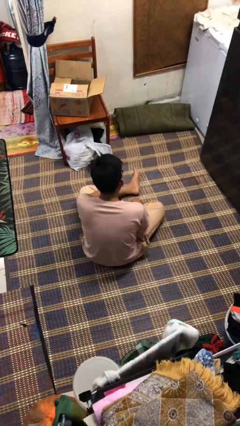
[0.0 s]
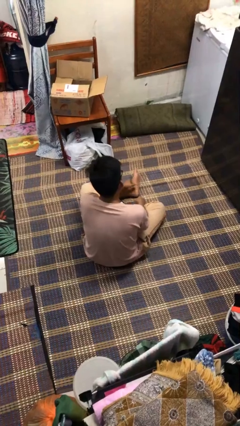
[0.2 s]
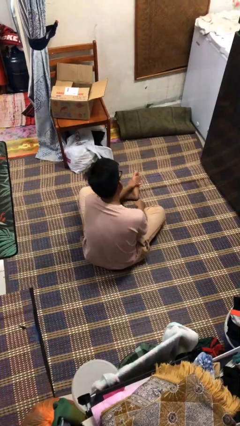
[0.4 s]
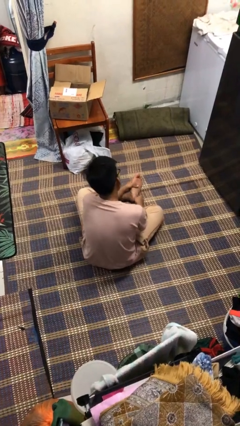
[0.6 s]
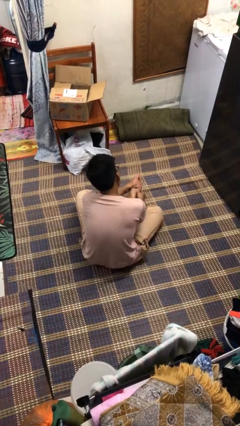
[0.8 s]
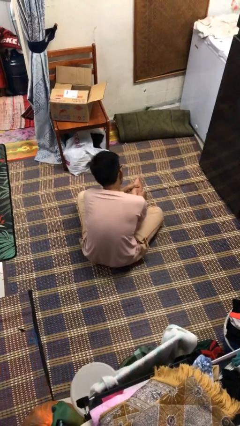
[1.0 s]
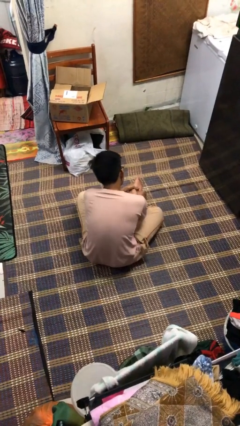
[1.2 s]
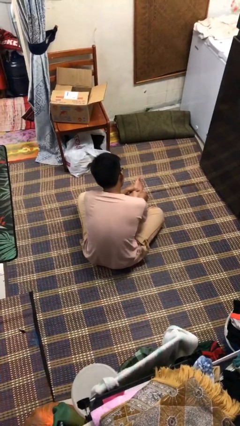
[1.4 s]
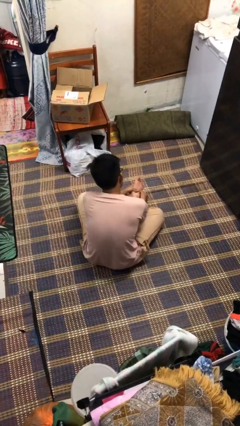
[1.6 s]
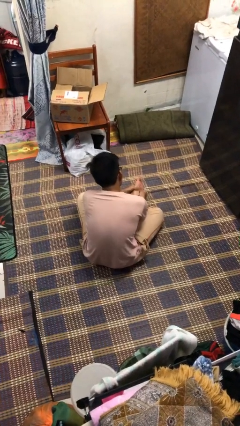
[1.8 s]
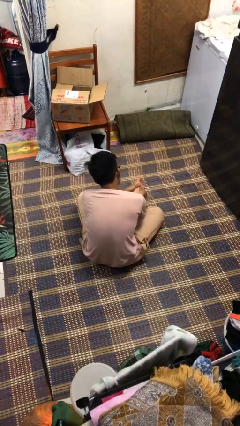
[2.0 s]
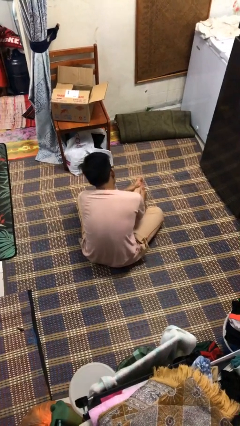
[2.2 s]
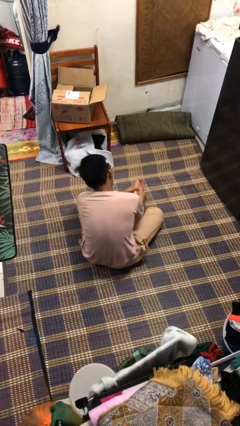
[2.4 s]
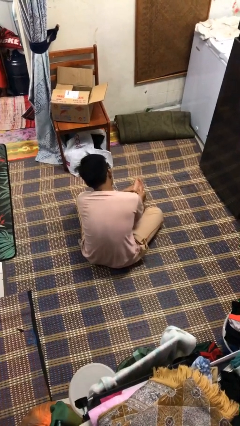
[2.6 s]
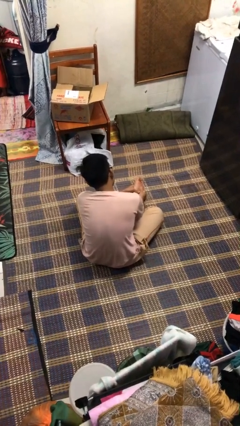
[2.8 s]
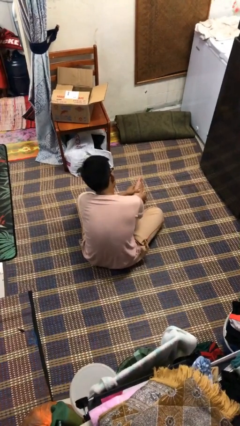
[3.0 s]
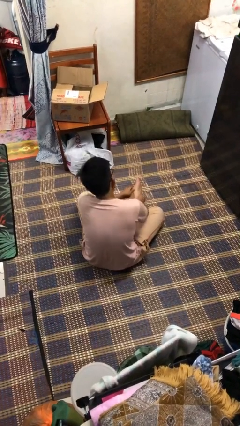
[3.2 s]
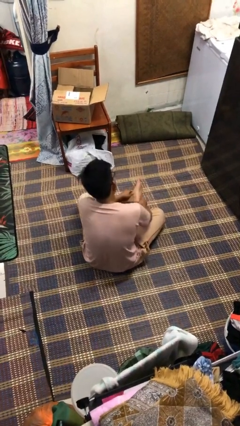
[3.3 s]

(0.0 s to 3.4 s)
person rubs foot

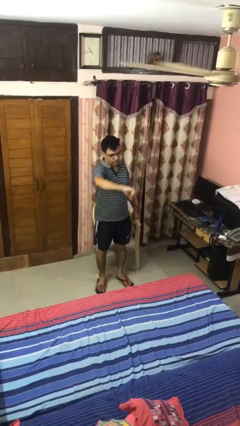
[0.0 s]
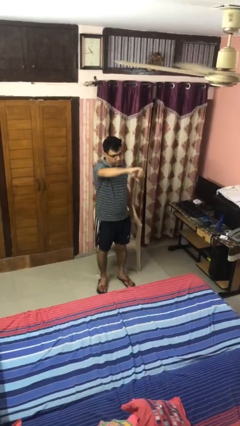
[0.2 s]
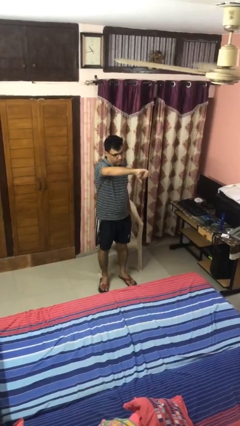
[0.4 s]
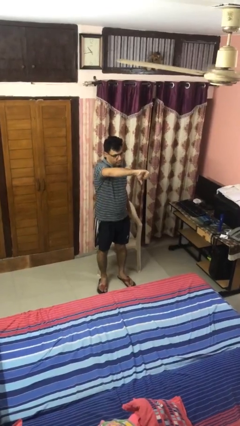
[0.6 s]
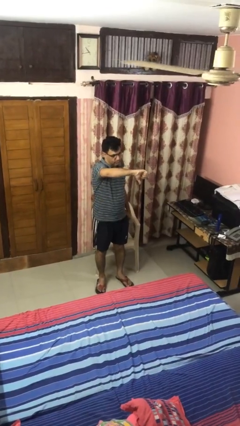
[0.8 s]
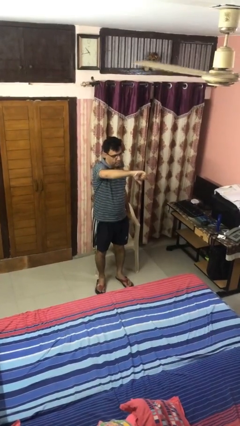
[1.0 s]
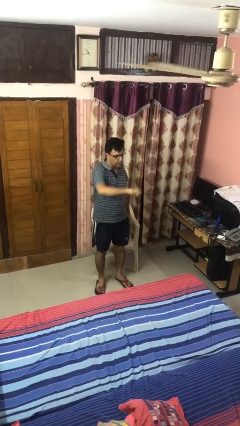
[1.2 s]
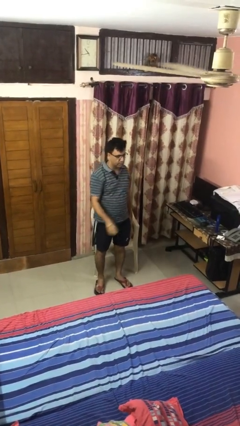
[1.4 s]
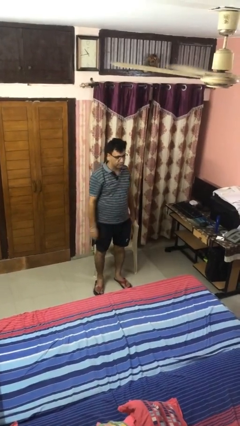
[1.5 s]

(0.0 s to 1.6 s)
person gestures thumbs down

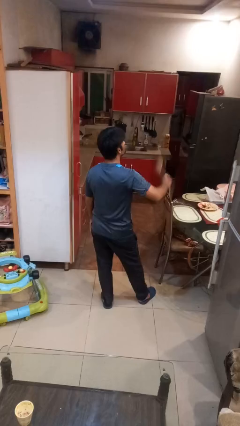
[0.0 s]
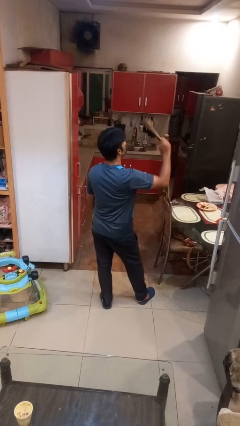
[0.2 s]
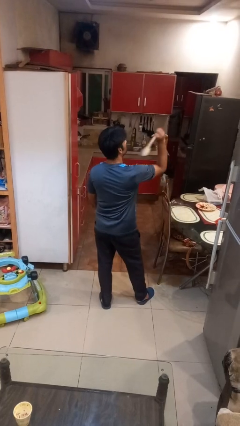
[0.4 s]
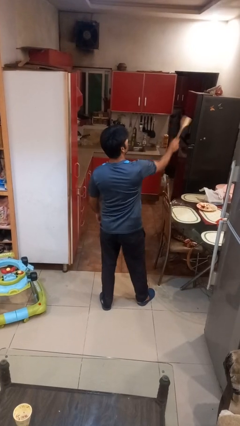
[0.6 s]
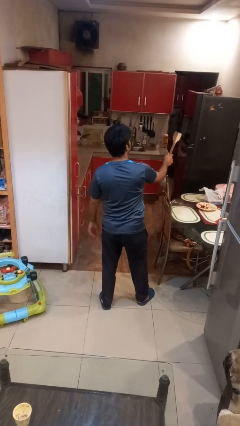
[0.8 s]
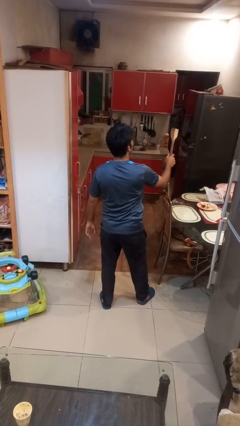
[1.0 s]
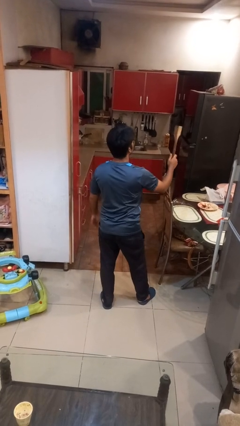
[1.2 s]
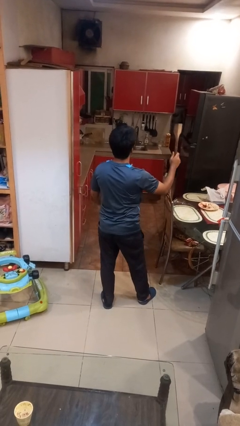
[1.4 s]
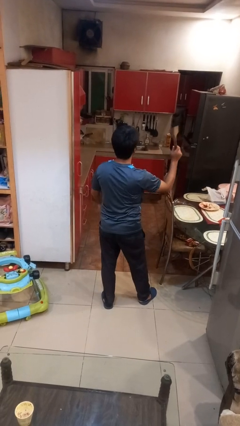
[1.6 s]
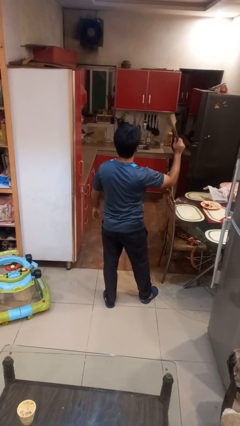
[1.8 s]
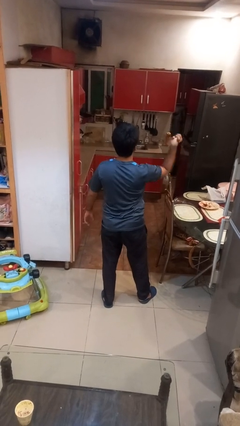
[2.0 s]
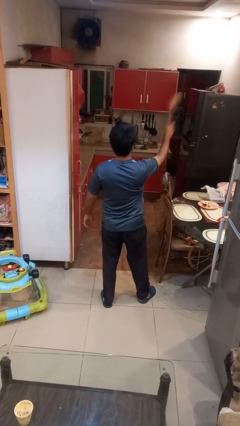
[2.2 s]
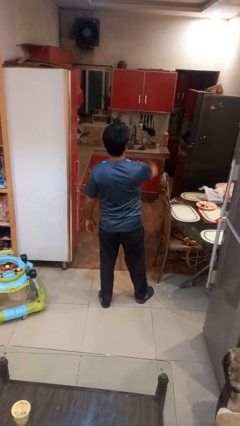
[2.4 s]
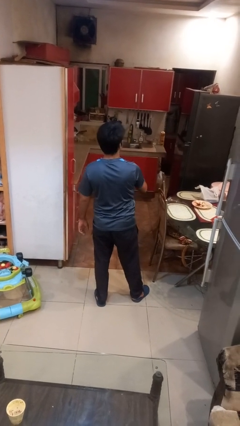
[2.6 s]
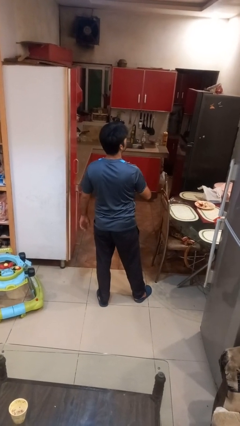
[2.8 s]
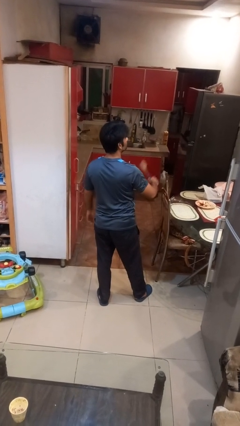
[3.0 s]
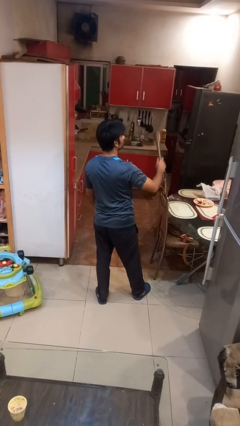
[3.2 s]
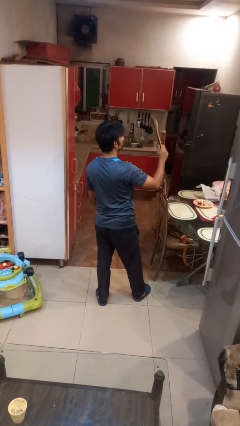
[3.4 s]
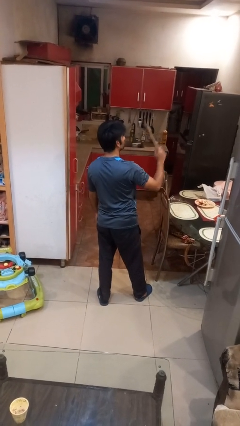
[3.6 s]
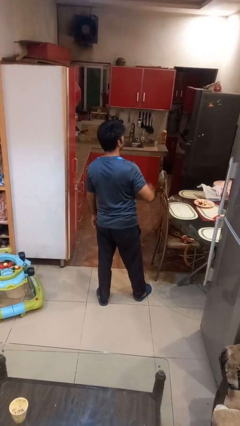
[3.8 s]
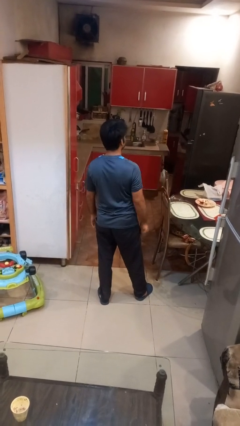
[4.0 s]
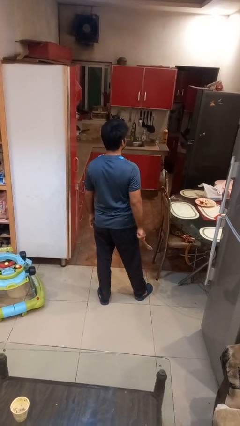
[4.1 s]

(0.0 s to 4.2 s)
person swats bug

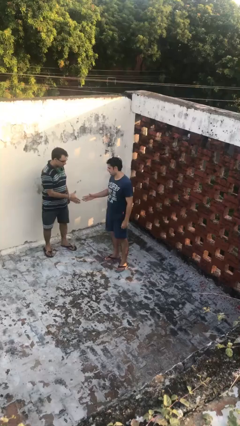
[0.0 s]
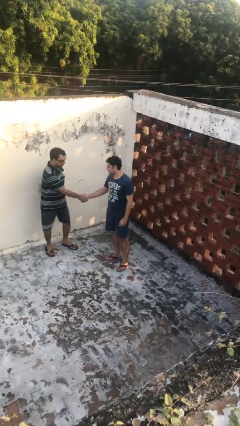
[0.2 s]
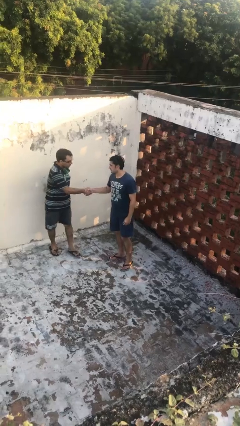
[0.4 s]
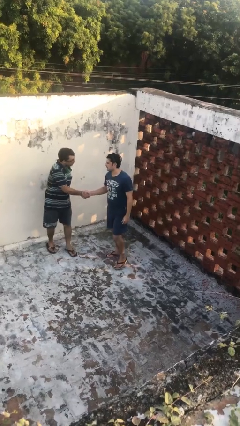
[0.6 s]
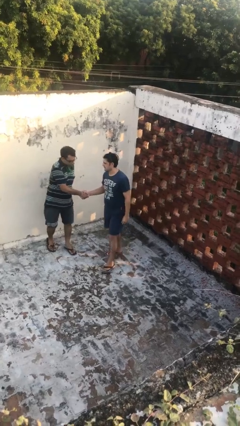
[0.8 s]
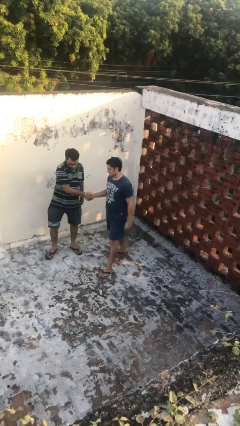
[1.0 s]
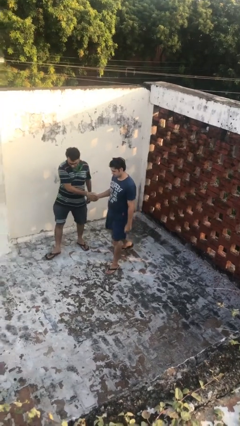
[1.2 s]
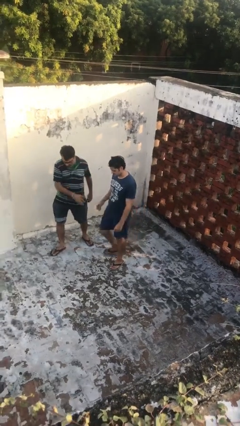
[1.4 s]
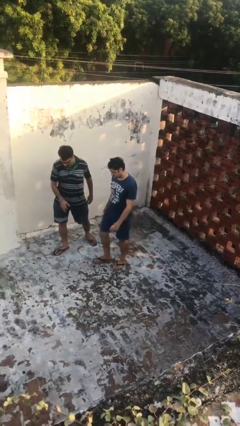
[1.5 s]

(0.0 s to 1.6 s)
person shakes hand

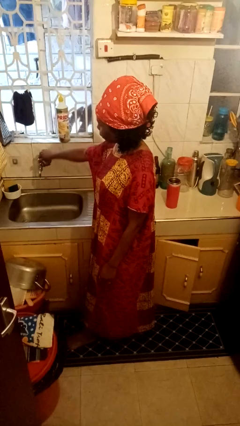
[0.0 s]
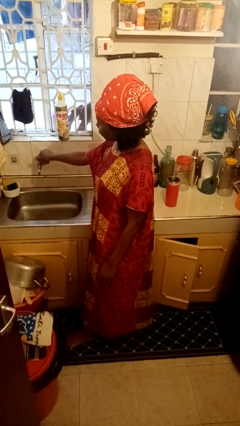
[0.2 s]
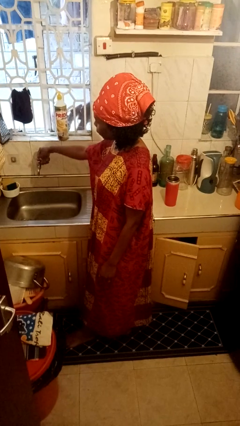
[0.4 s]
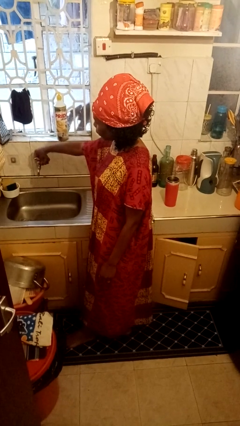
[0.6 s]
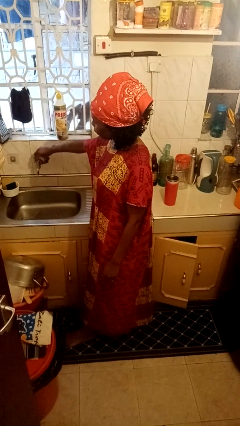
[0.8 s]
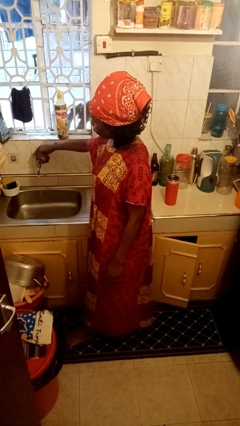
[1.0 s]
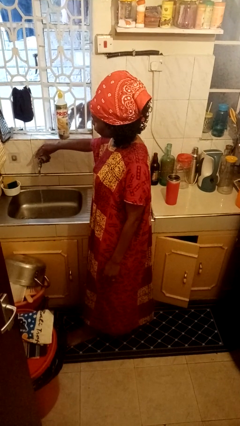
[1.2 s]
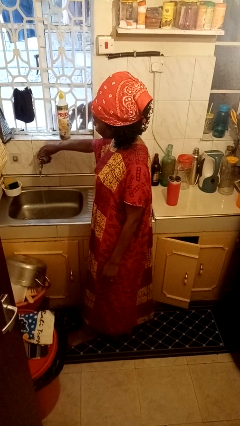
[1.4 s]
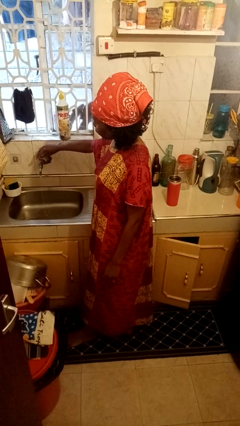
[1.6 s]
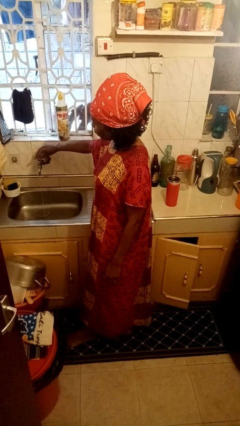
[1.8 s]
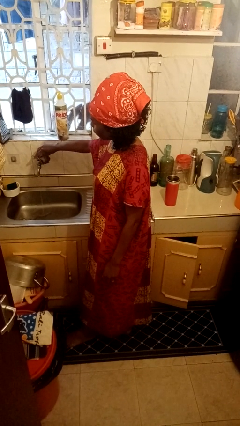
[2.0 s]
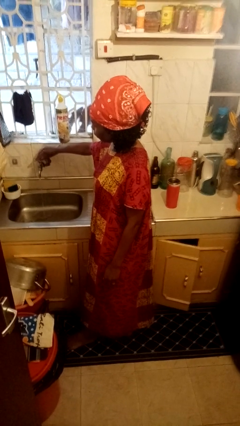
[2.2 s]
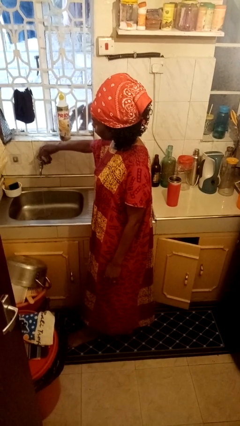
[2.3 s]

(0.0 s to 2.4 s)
person turns on faucet

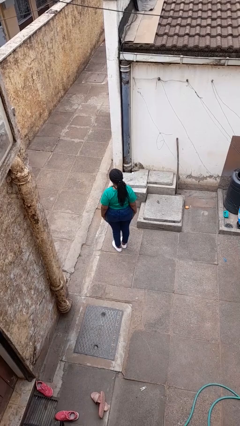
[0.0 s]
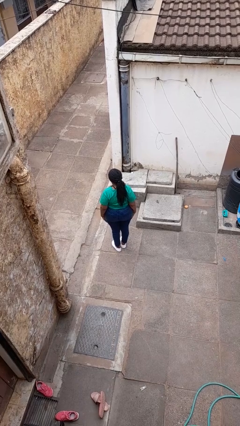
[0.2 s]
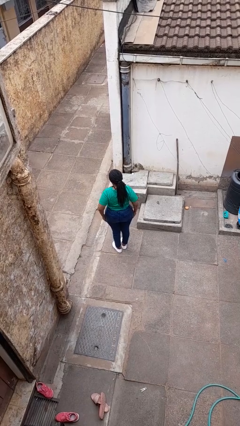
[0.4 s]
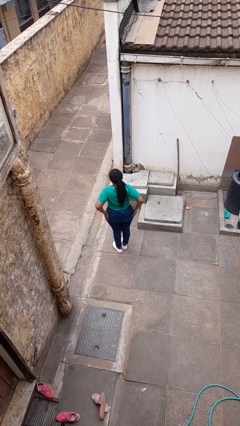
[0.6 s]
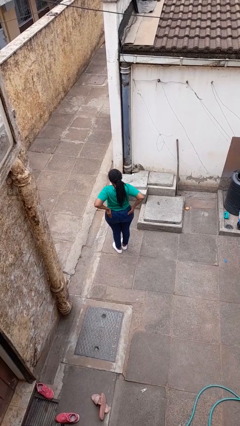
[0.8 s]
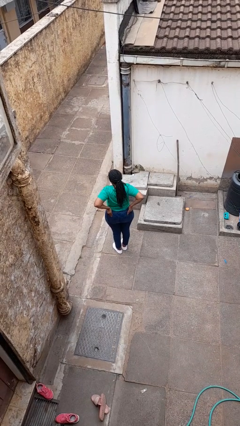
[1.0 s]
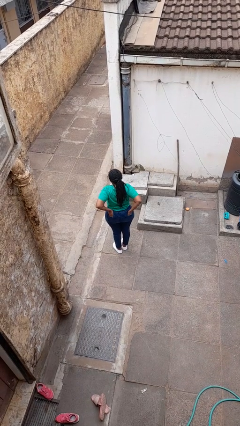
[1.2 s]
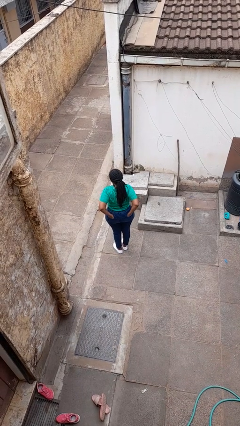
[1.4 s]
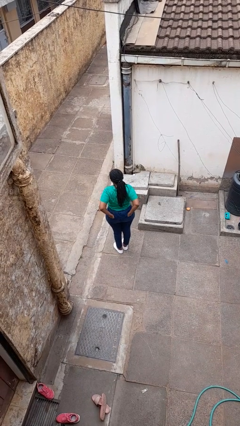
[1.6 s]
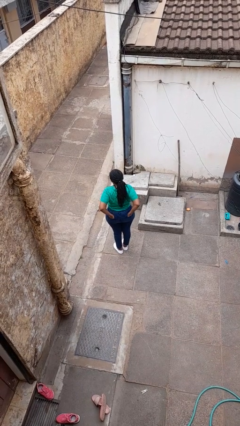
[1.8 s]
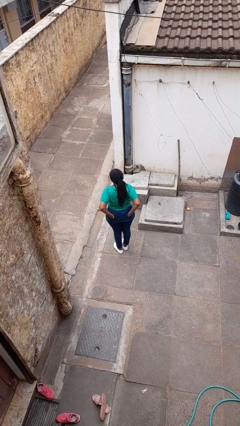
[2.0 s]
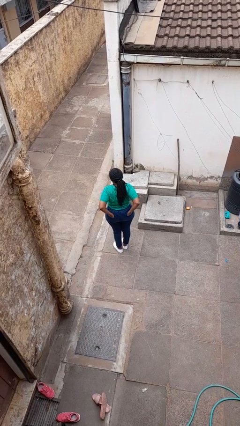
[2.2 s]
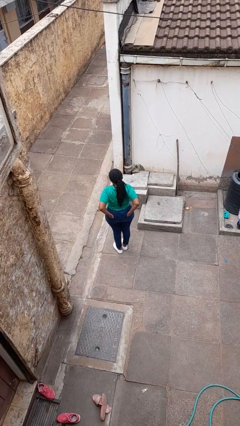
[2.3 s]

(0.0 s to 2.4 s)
person puts hands in back pockets
